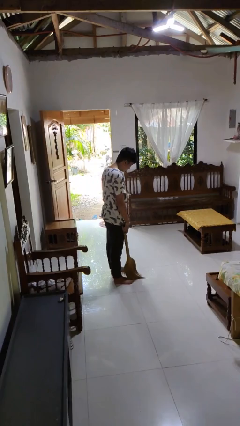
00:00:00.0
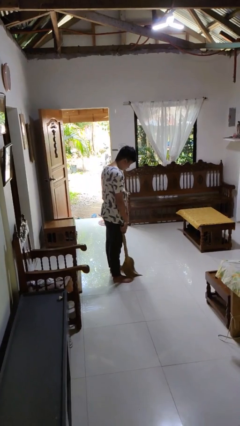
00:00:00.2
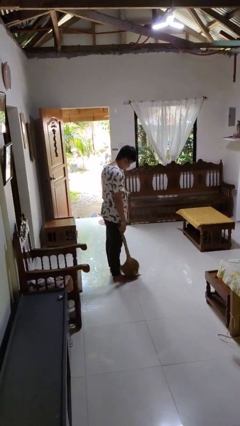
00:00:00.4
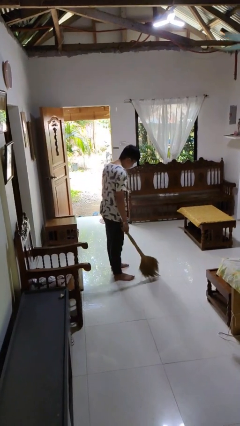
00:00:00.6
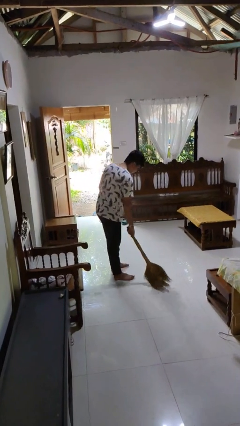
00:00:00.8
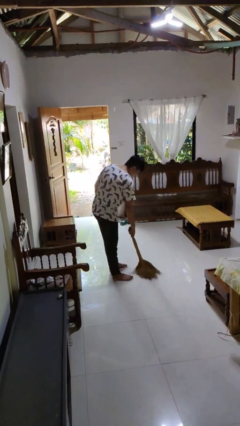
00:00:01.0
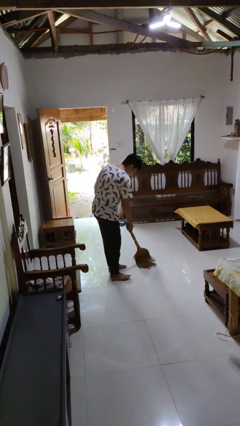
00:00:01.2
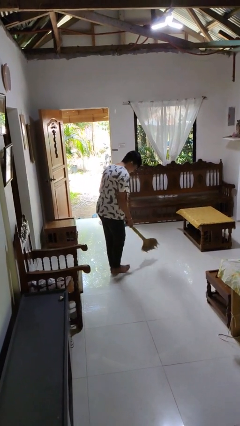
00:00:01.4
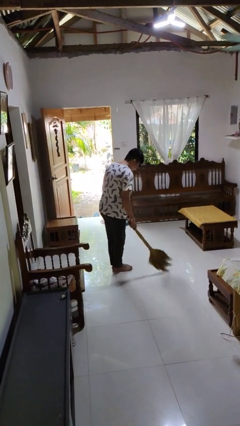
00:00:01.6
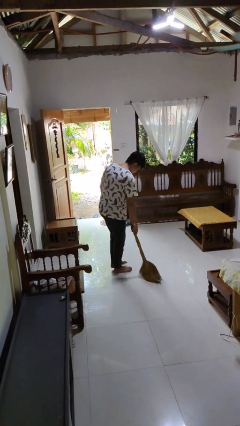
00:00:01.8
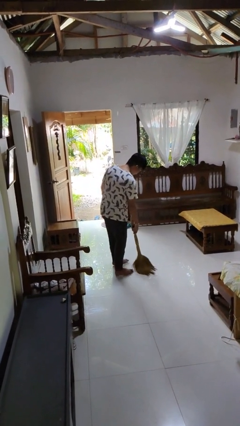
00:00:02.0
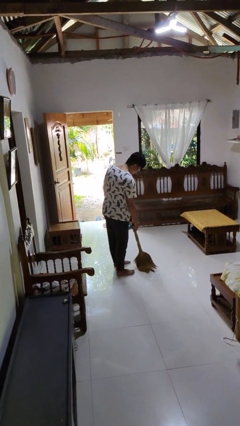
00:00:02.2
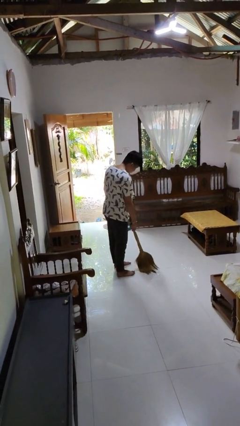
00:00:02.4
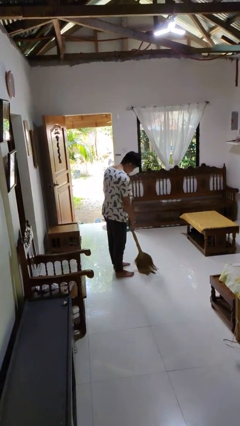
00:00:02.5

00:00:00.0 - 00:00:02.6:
person sweeps floor

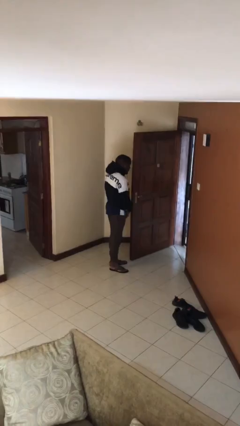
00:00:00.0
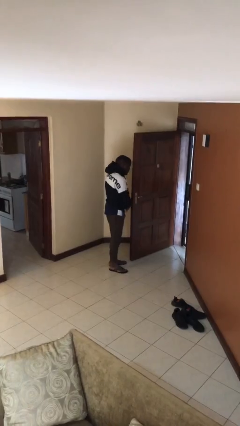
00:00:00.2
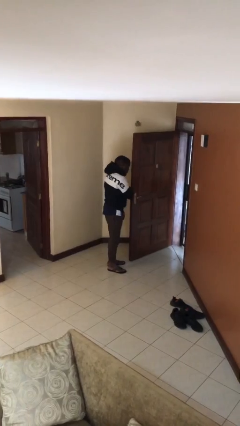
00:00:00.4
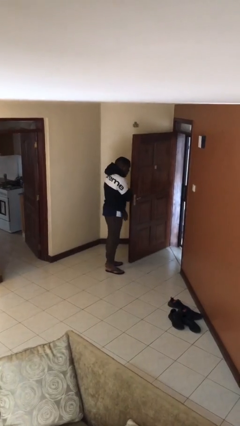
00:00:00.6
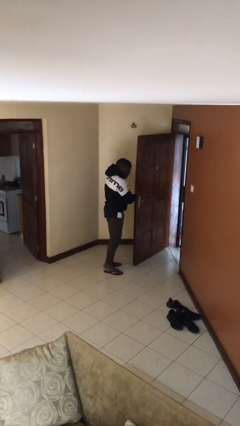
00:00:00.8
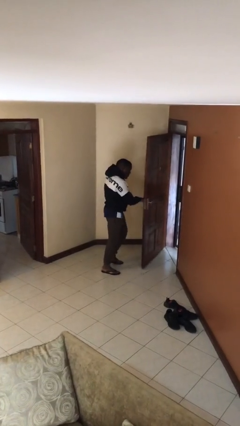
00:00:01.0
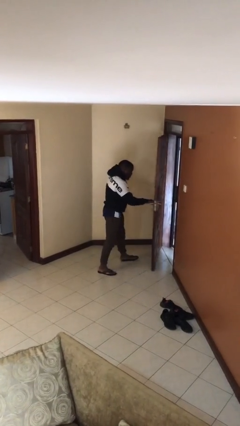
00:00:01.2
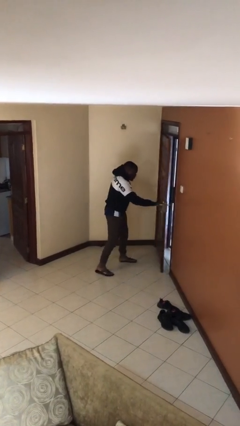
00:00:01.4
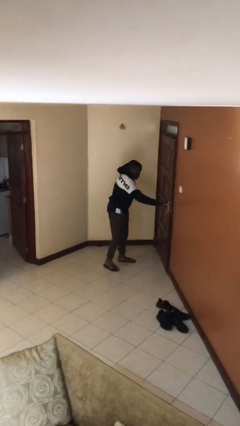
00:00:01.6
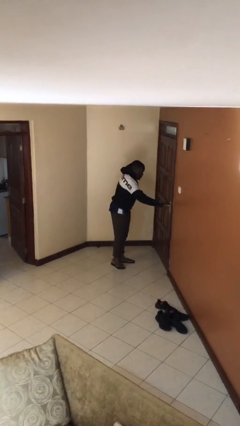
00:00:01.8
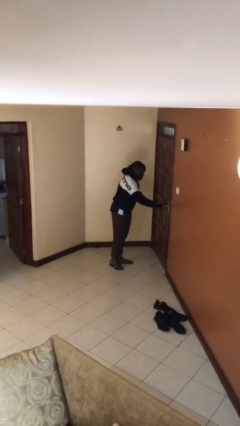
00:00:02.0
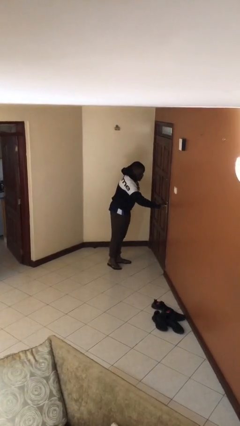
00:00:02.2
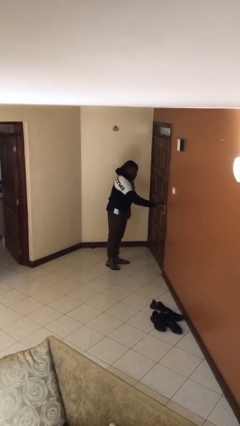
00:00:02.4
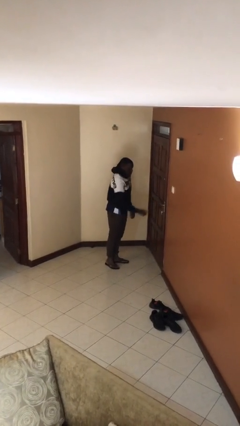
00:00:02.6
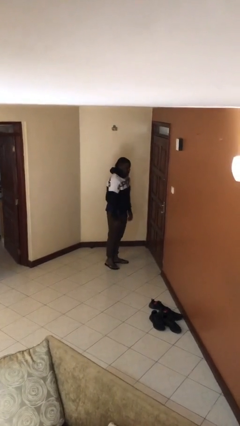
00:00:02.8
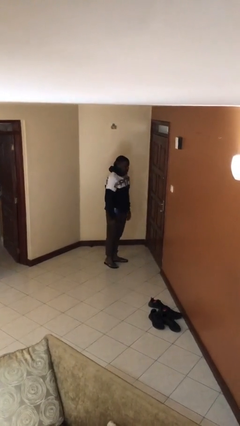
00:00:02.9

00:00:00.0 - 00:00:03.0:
person closes facility door

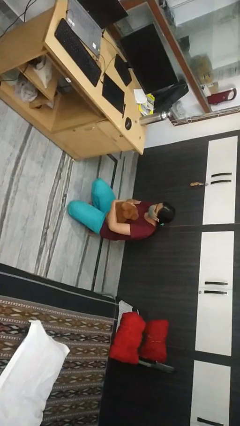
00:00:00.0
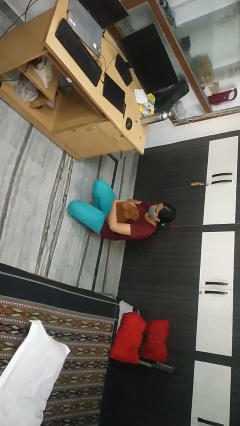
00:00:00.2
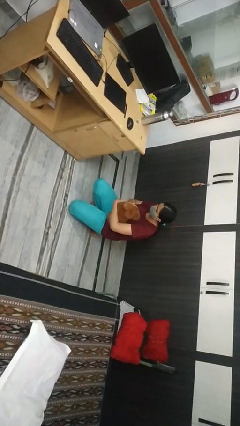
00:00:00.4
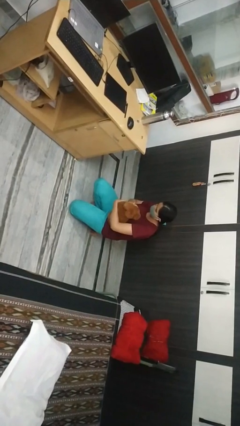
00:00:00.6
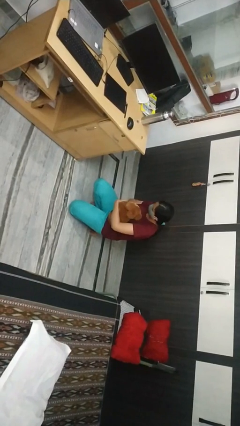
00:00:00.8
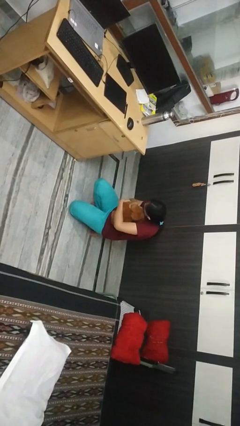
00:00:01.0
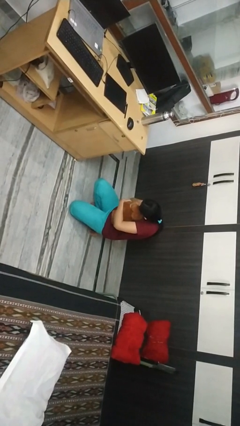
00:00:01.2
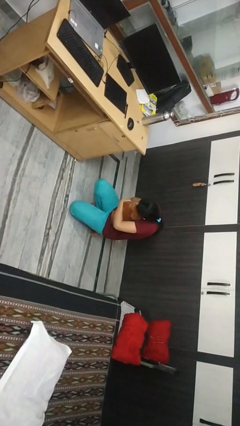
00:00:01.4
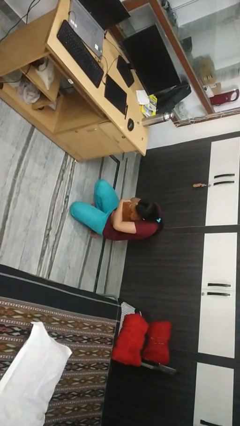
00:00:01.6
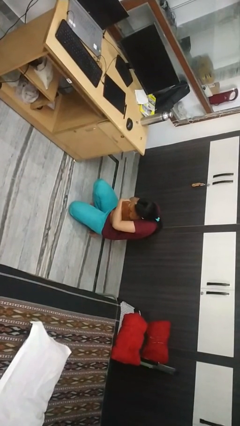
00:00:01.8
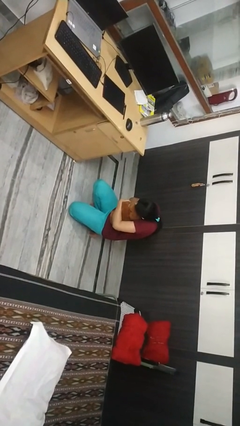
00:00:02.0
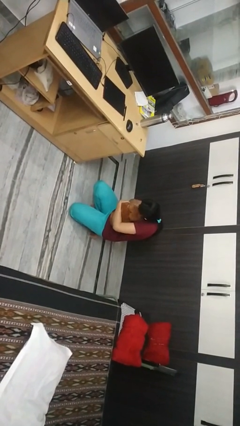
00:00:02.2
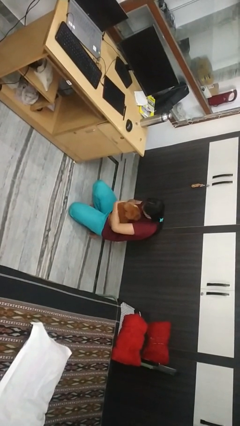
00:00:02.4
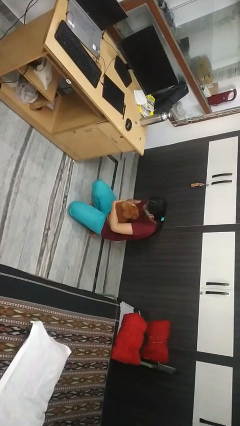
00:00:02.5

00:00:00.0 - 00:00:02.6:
person hugs dog

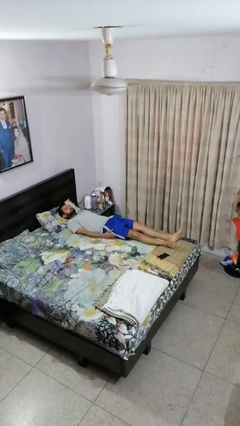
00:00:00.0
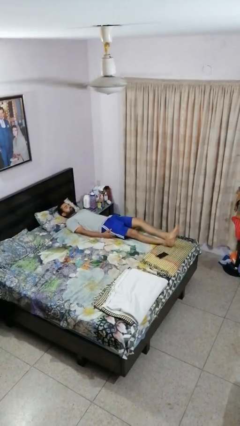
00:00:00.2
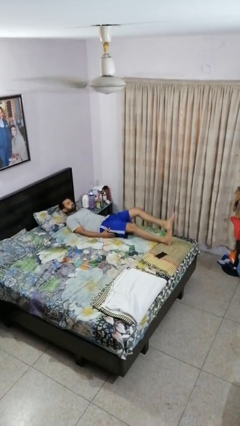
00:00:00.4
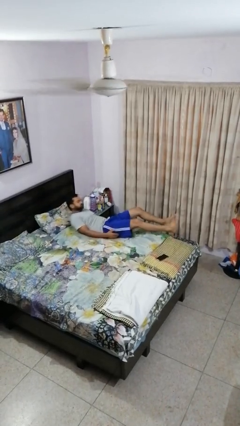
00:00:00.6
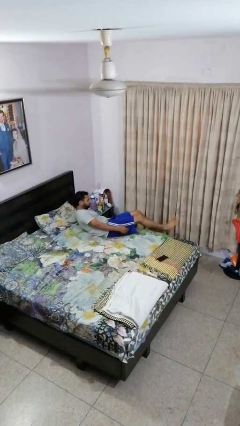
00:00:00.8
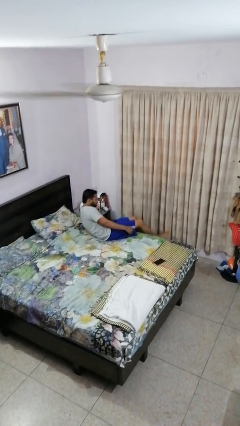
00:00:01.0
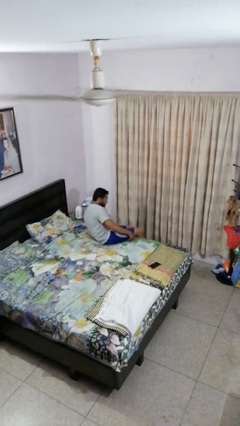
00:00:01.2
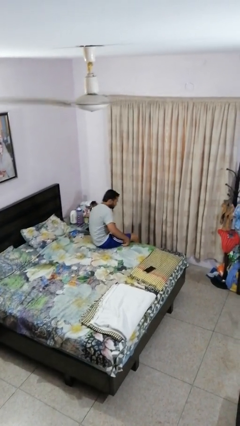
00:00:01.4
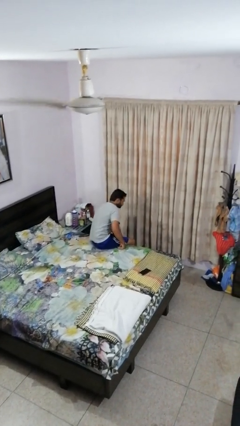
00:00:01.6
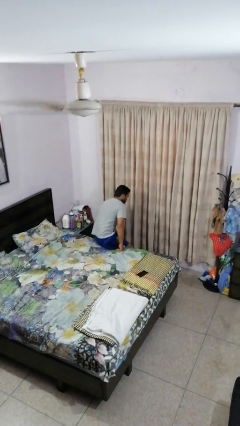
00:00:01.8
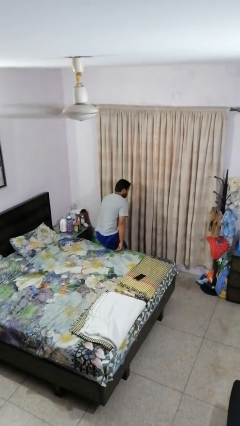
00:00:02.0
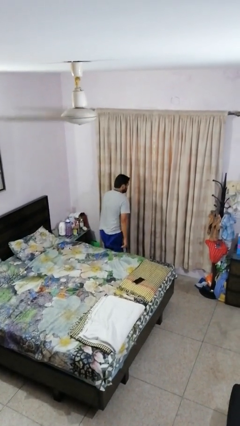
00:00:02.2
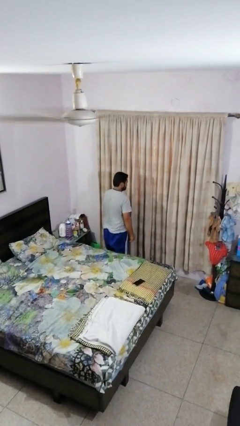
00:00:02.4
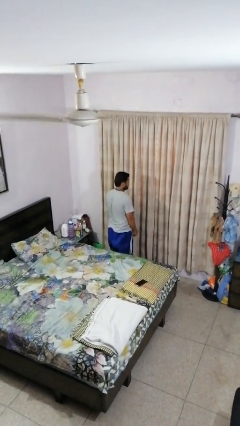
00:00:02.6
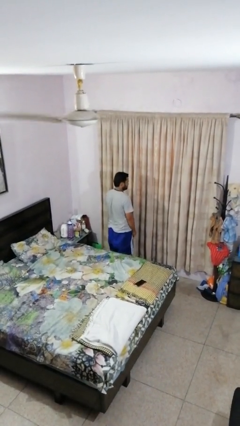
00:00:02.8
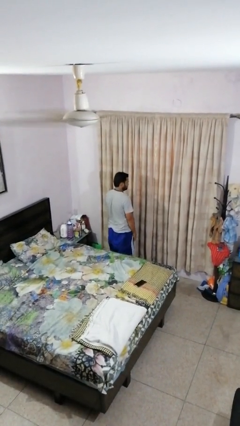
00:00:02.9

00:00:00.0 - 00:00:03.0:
person stands up

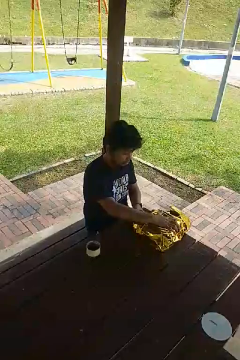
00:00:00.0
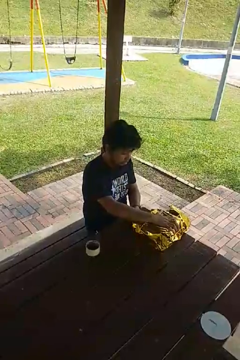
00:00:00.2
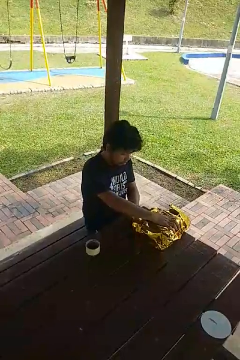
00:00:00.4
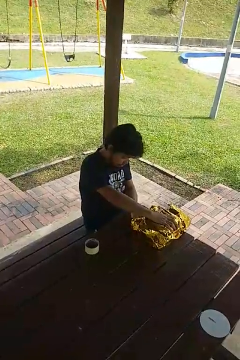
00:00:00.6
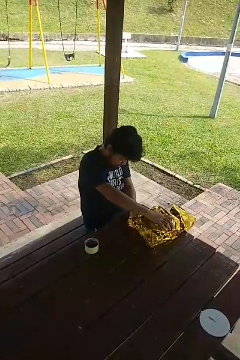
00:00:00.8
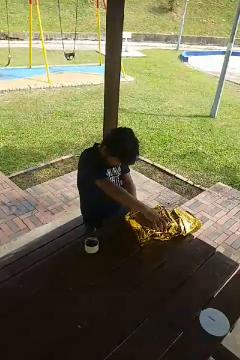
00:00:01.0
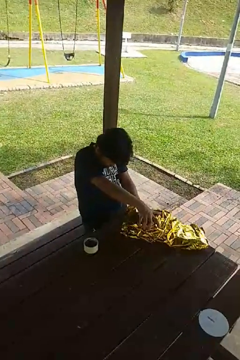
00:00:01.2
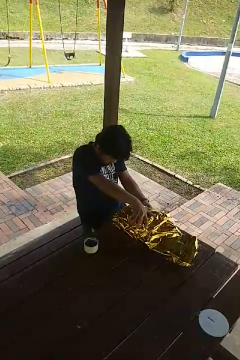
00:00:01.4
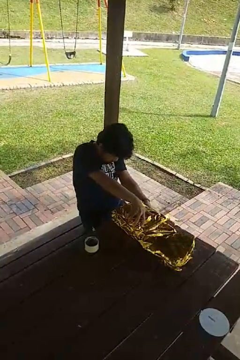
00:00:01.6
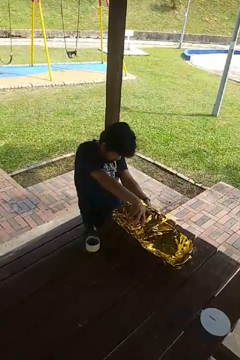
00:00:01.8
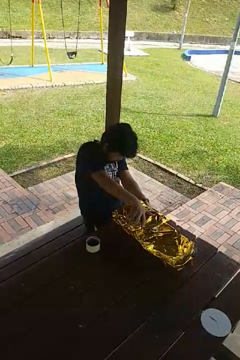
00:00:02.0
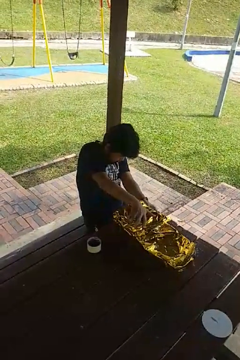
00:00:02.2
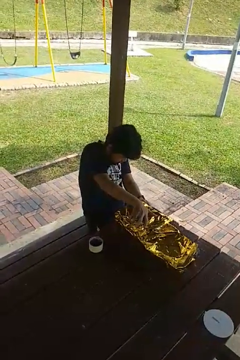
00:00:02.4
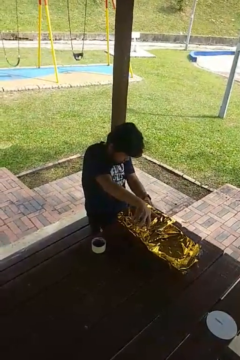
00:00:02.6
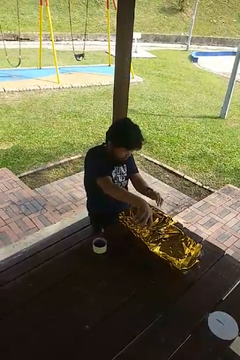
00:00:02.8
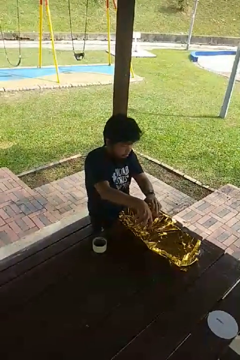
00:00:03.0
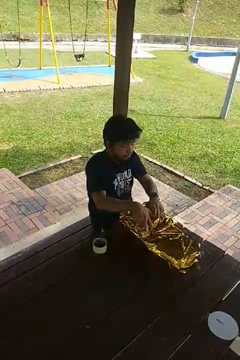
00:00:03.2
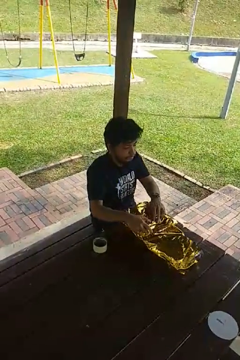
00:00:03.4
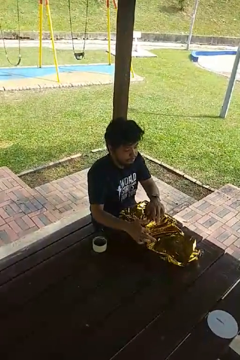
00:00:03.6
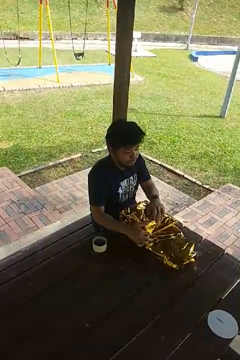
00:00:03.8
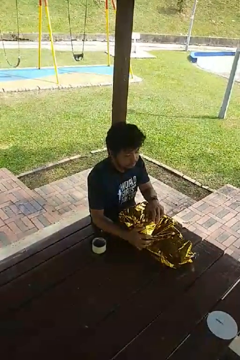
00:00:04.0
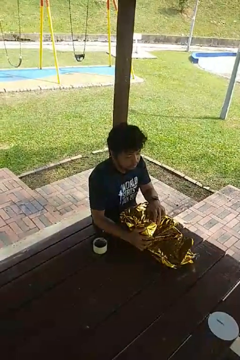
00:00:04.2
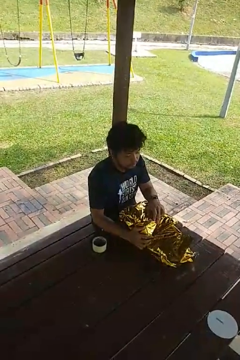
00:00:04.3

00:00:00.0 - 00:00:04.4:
person wraps box

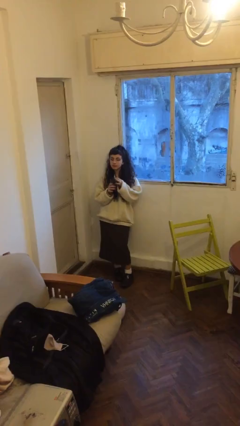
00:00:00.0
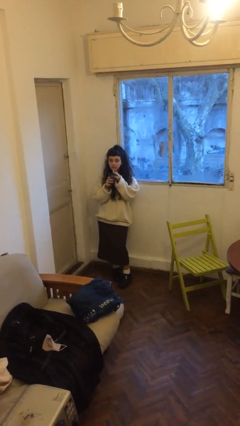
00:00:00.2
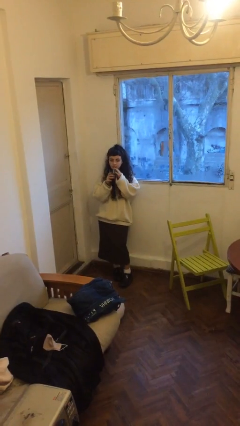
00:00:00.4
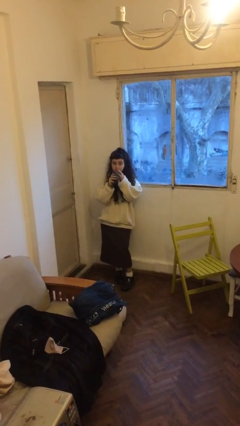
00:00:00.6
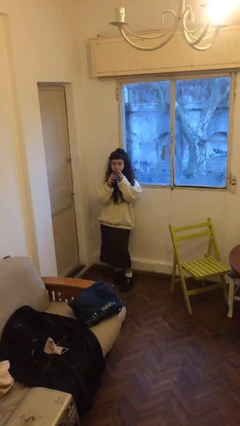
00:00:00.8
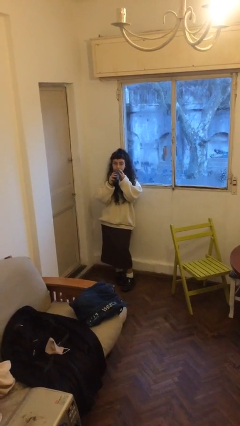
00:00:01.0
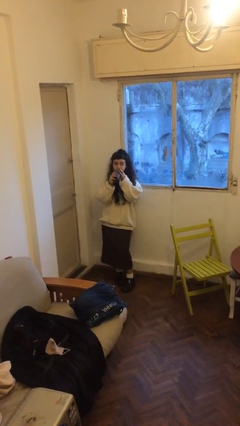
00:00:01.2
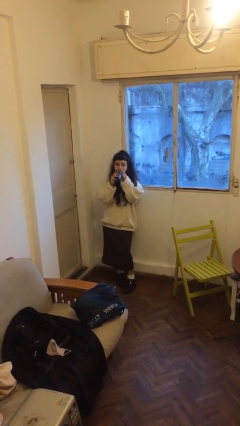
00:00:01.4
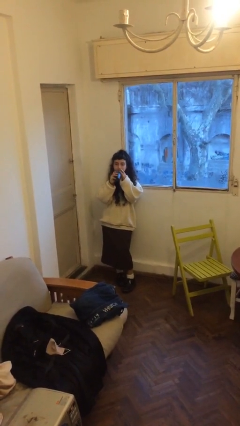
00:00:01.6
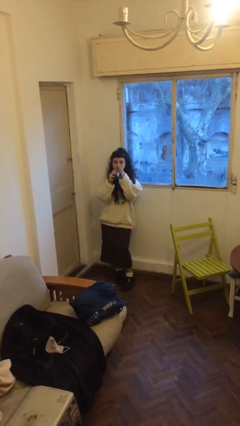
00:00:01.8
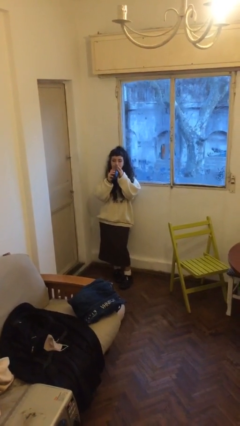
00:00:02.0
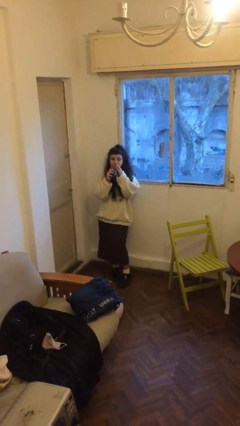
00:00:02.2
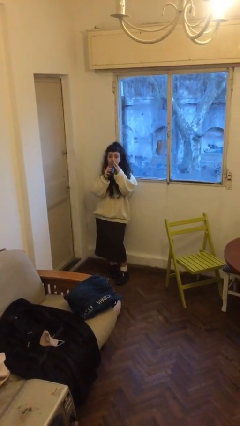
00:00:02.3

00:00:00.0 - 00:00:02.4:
person drinks from straw

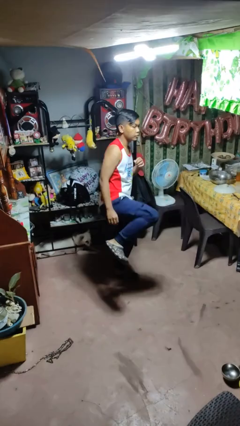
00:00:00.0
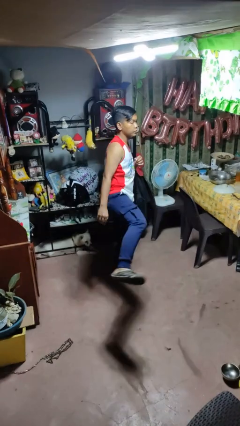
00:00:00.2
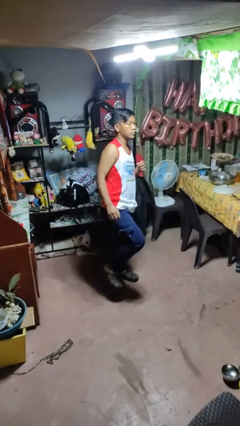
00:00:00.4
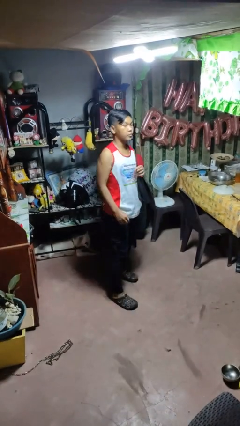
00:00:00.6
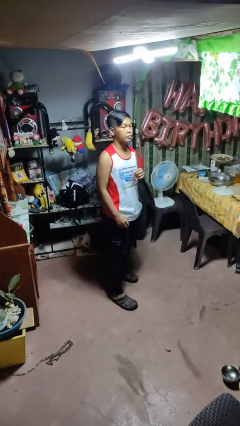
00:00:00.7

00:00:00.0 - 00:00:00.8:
person karate kicks
